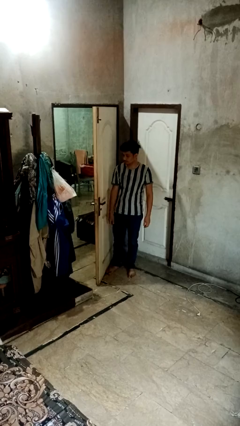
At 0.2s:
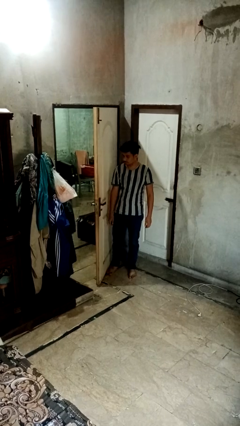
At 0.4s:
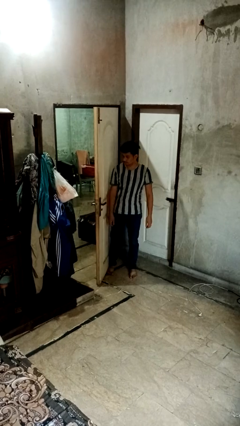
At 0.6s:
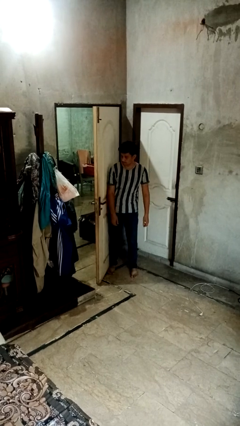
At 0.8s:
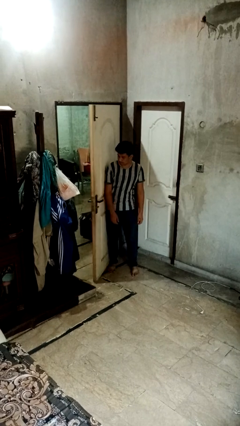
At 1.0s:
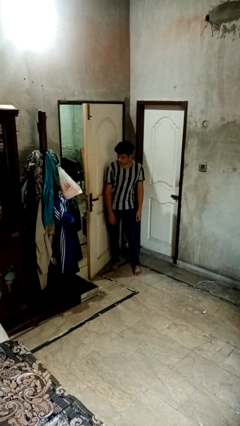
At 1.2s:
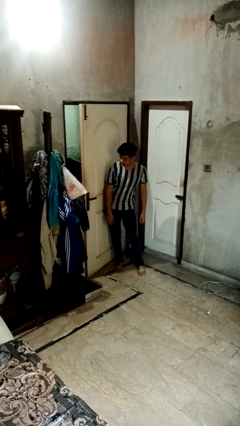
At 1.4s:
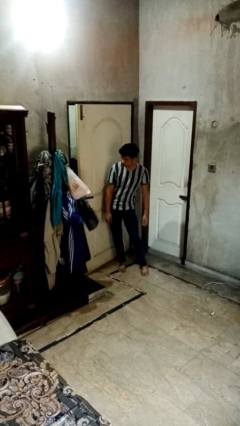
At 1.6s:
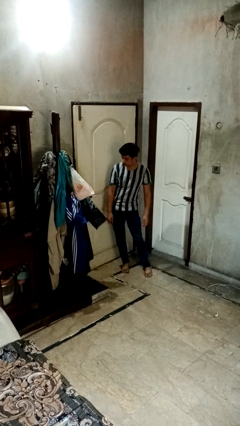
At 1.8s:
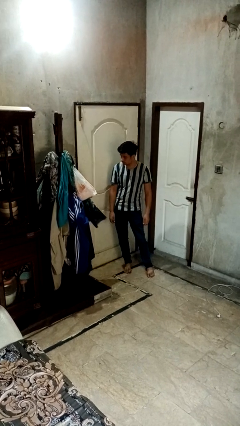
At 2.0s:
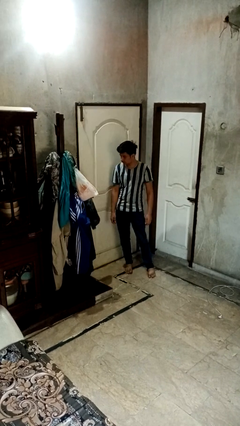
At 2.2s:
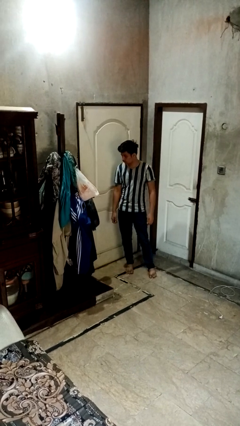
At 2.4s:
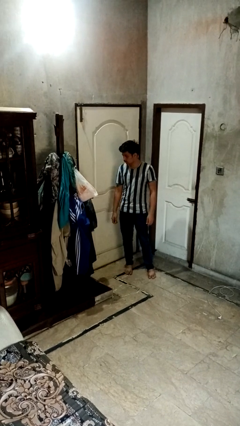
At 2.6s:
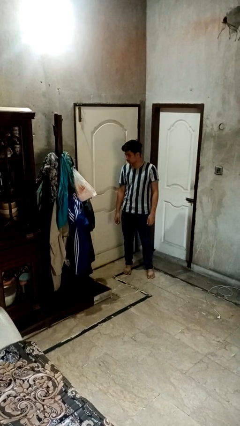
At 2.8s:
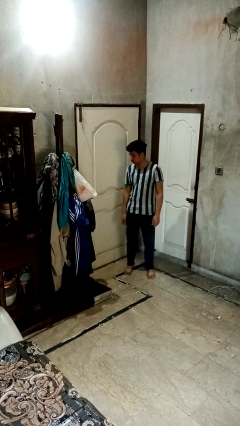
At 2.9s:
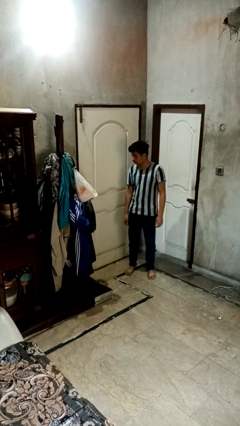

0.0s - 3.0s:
person closes door with hip

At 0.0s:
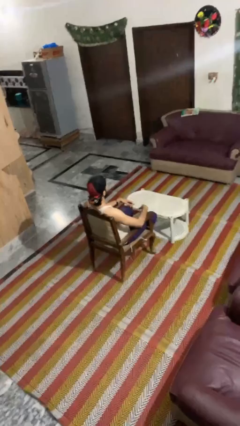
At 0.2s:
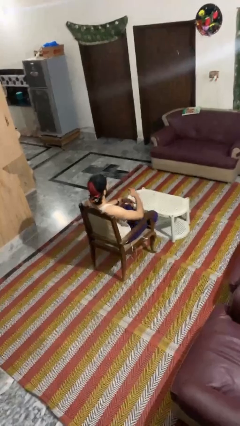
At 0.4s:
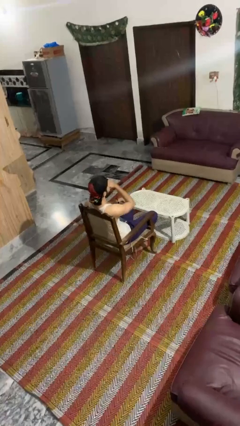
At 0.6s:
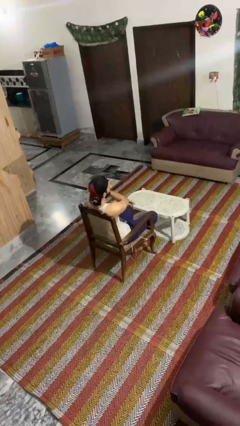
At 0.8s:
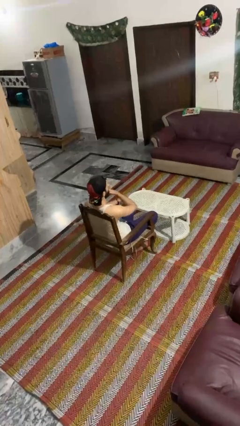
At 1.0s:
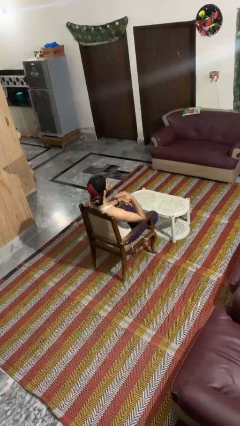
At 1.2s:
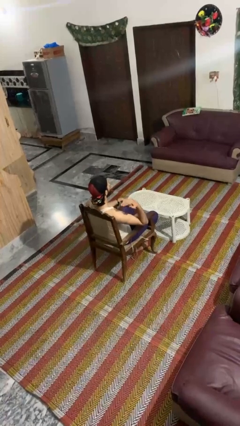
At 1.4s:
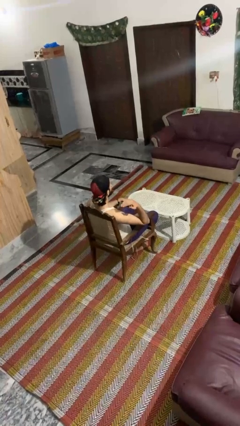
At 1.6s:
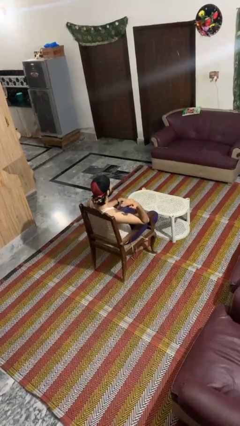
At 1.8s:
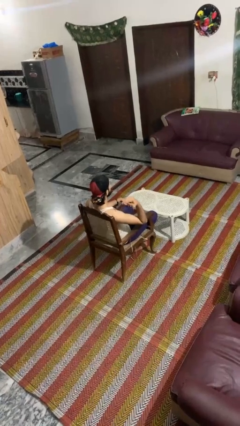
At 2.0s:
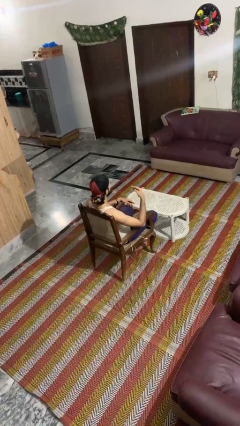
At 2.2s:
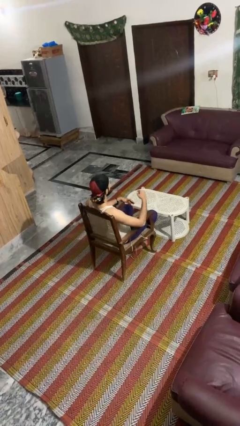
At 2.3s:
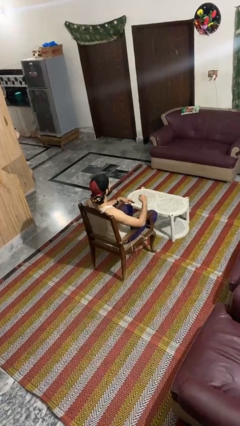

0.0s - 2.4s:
person gestures cut

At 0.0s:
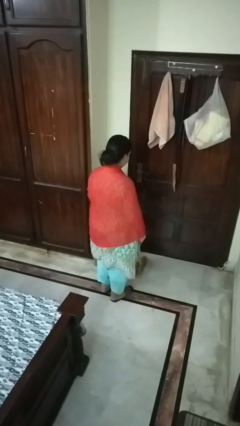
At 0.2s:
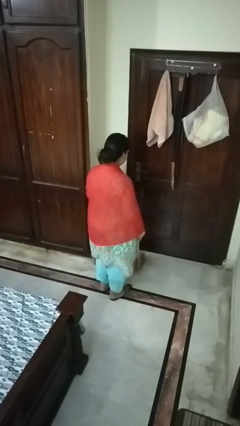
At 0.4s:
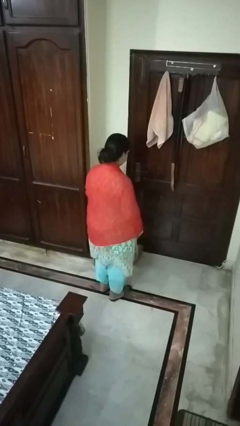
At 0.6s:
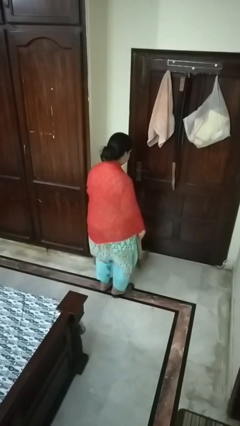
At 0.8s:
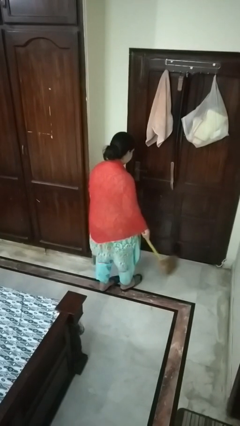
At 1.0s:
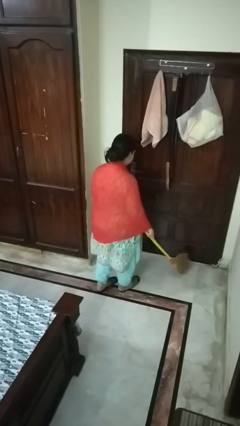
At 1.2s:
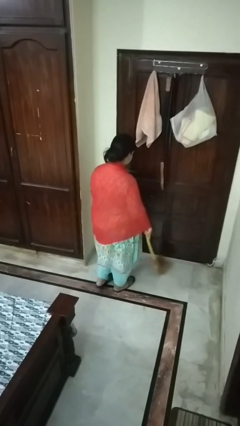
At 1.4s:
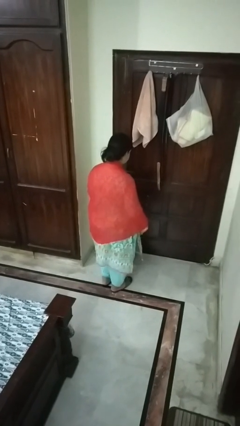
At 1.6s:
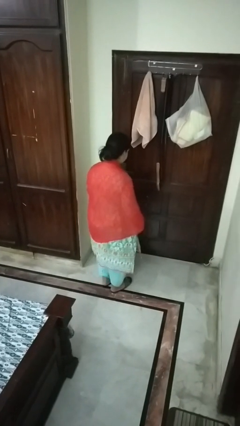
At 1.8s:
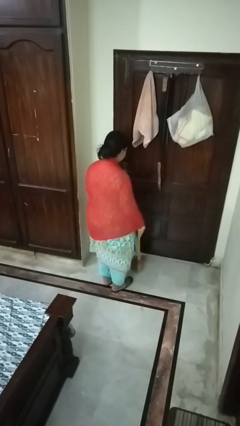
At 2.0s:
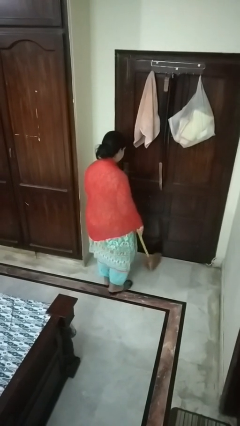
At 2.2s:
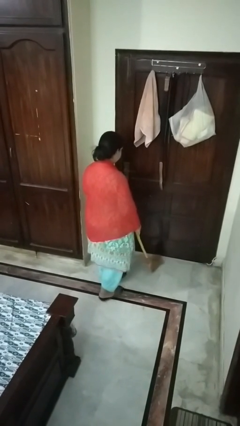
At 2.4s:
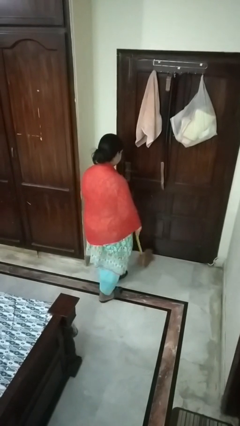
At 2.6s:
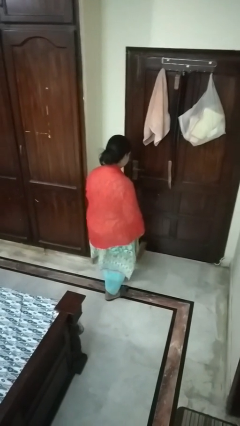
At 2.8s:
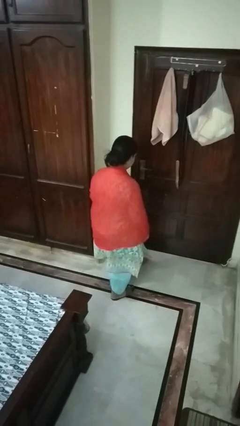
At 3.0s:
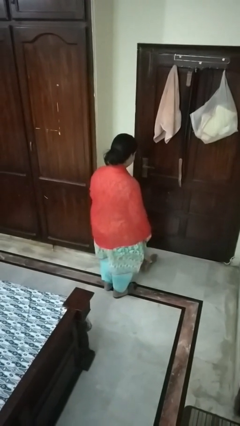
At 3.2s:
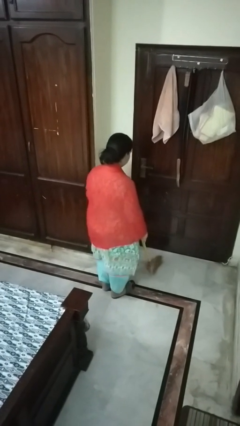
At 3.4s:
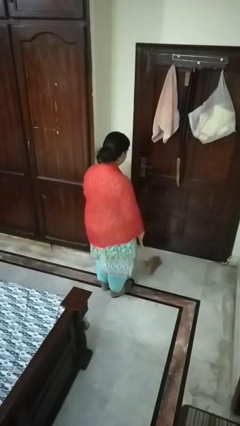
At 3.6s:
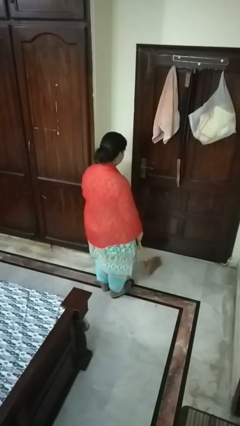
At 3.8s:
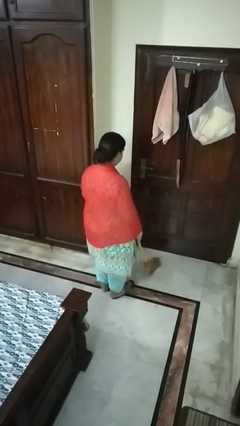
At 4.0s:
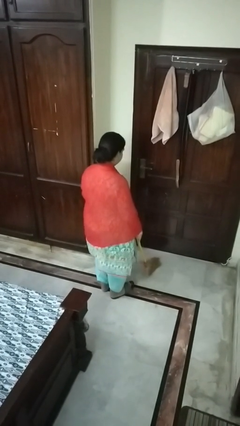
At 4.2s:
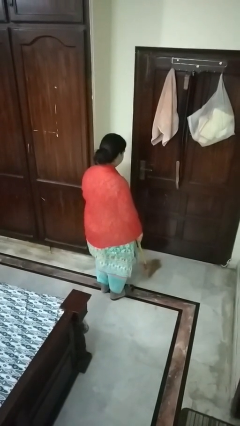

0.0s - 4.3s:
person sweeps floor

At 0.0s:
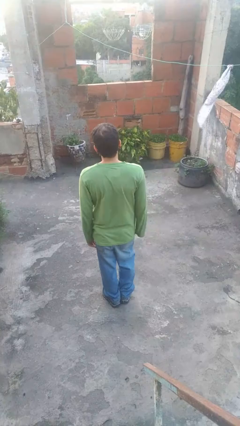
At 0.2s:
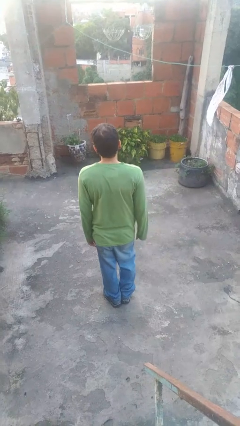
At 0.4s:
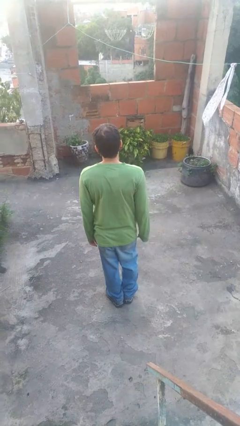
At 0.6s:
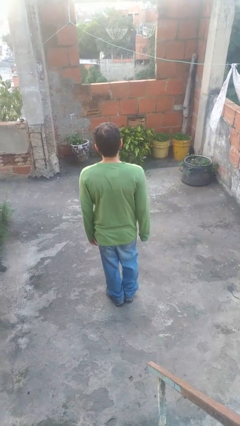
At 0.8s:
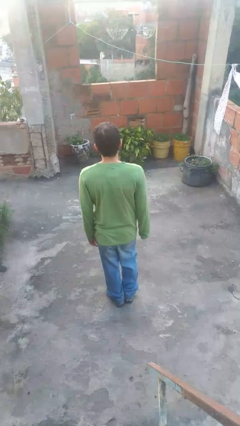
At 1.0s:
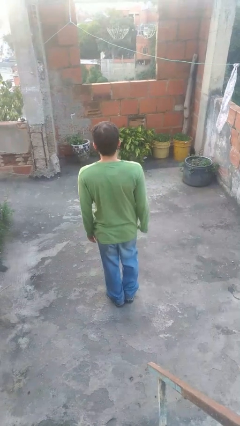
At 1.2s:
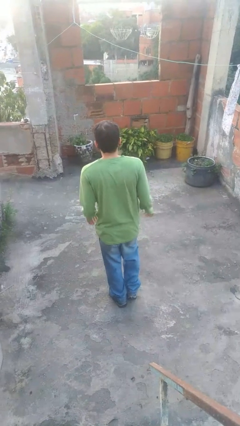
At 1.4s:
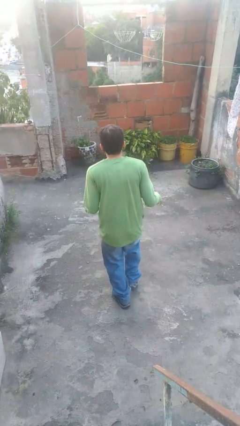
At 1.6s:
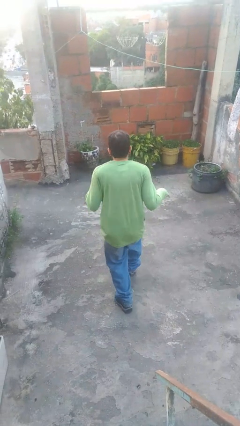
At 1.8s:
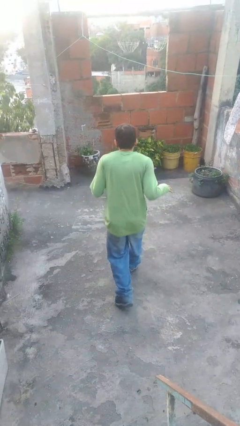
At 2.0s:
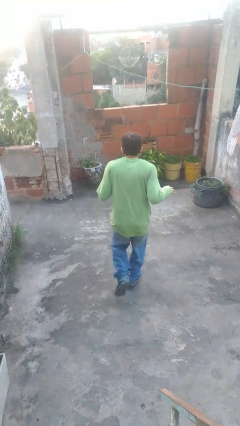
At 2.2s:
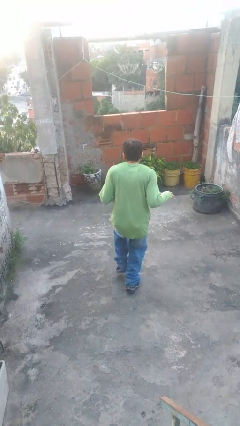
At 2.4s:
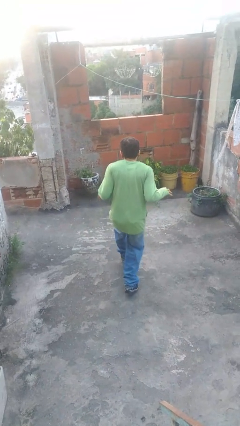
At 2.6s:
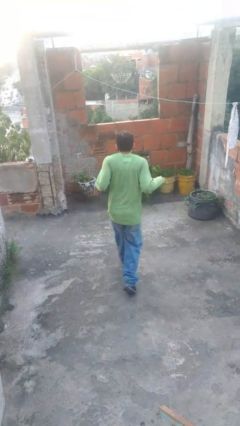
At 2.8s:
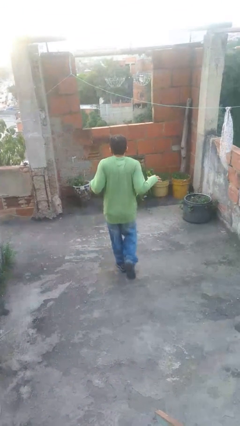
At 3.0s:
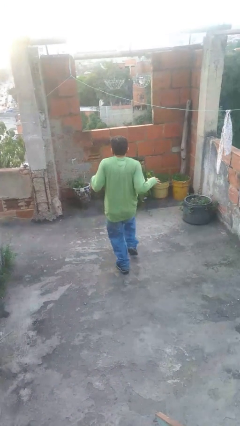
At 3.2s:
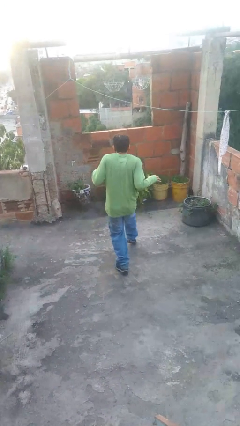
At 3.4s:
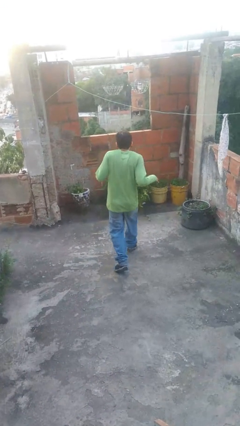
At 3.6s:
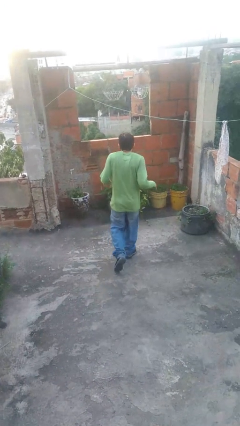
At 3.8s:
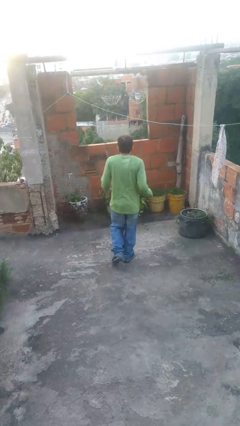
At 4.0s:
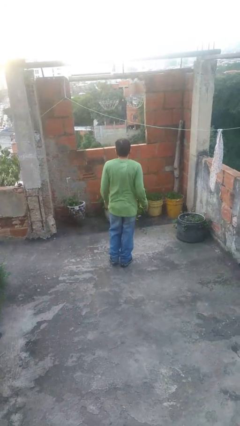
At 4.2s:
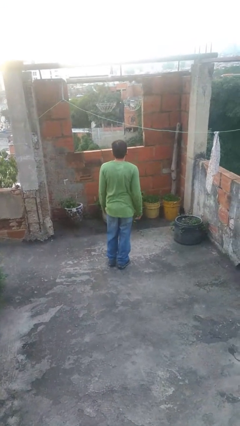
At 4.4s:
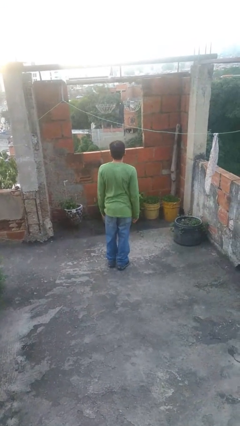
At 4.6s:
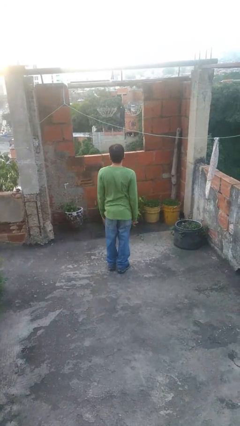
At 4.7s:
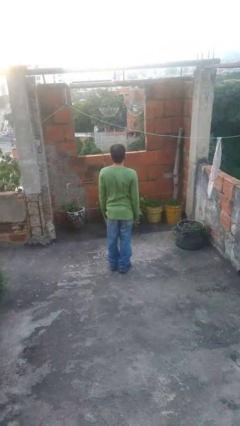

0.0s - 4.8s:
person walks tiptoe

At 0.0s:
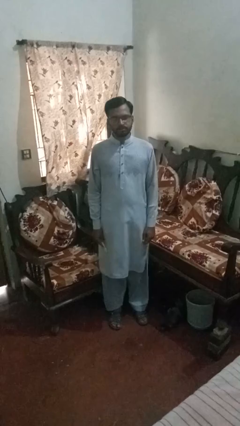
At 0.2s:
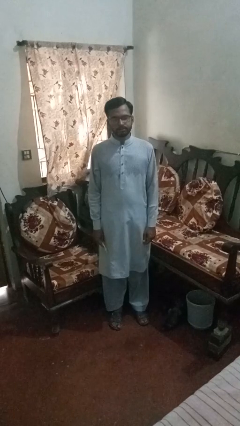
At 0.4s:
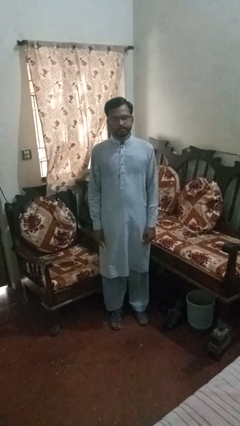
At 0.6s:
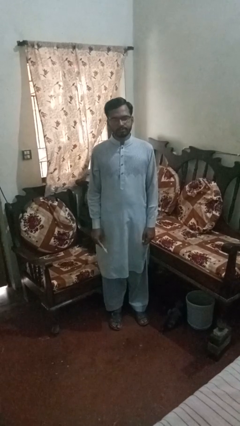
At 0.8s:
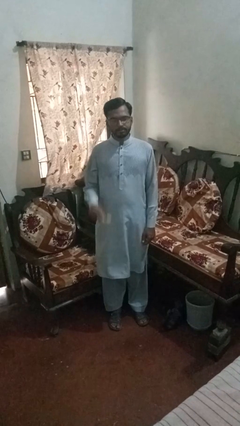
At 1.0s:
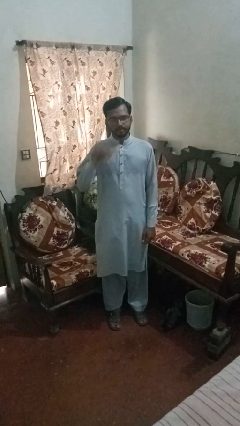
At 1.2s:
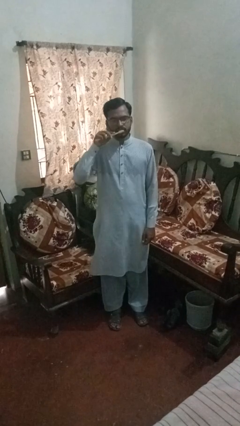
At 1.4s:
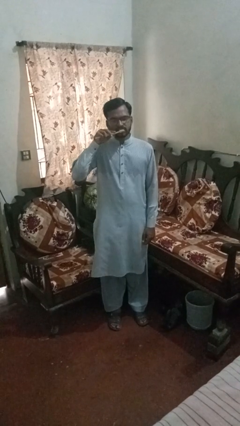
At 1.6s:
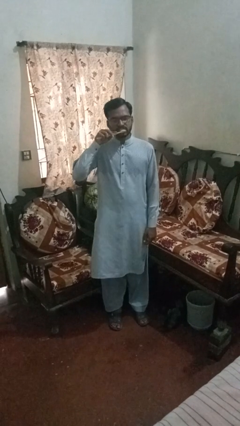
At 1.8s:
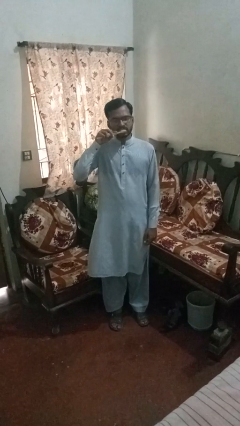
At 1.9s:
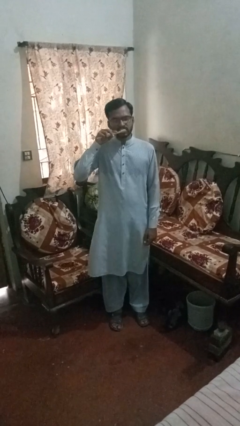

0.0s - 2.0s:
person brushes teeth

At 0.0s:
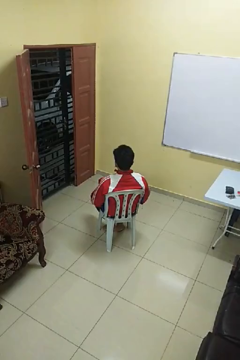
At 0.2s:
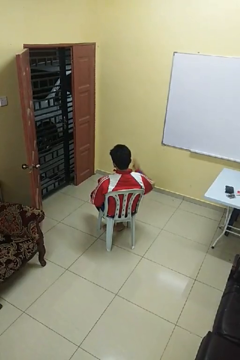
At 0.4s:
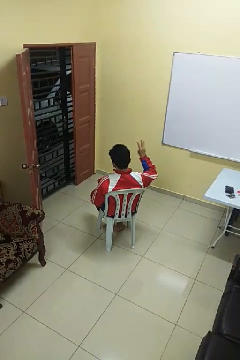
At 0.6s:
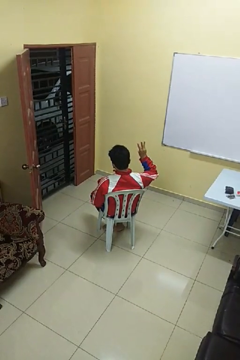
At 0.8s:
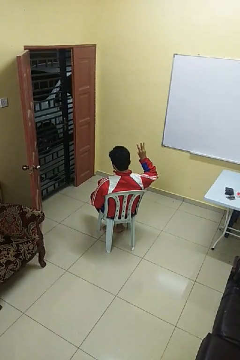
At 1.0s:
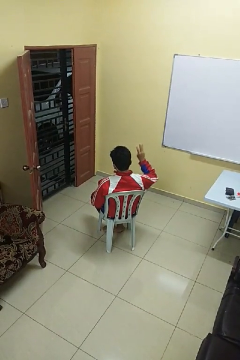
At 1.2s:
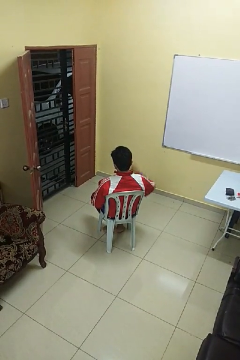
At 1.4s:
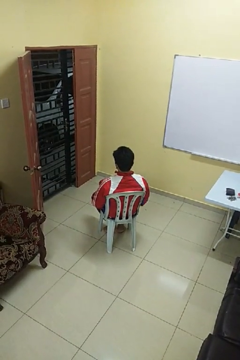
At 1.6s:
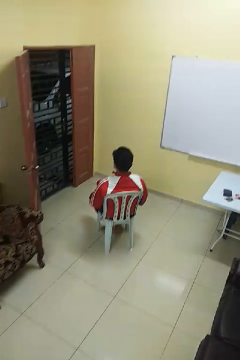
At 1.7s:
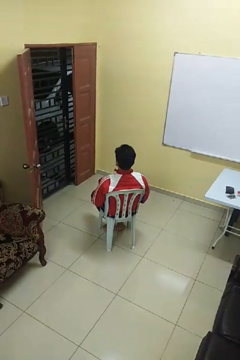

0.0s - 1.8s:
person gestures number three
